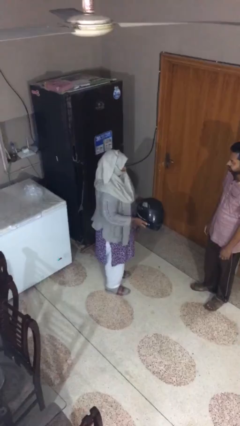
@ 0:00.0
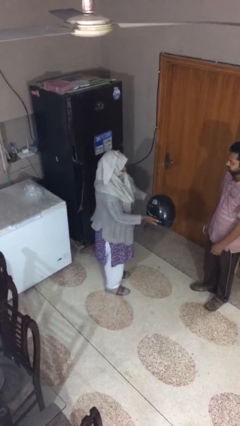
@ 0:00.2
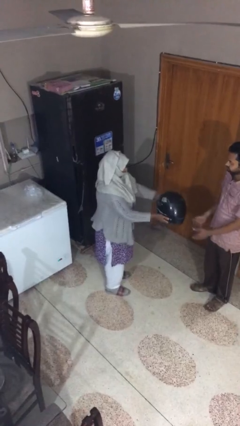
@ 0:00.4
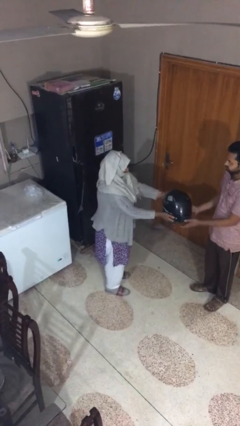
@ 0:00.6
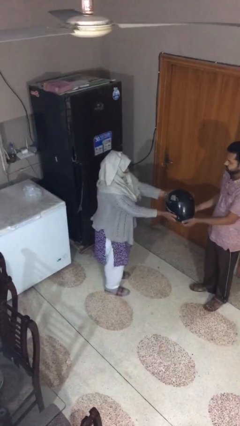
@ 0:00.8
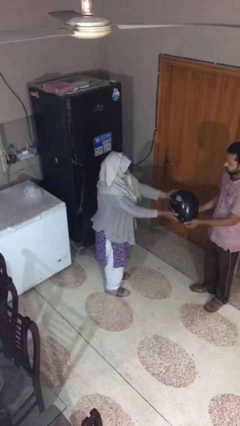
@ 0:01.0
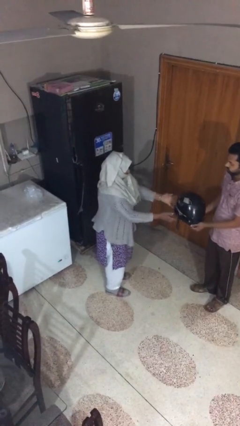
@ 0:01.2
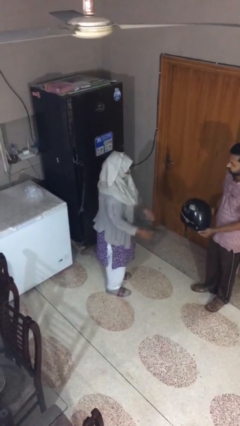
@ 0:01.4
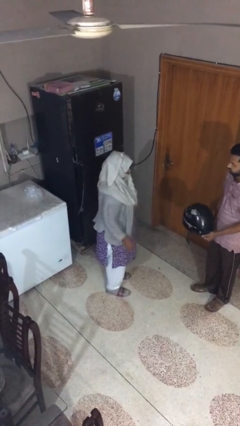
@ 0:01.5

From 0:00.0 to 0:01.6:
person transfers object to person

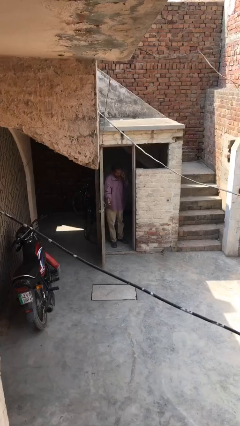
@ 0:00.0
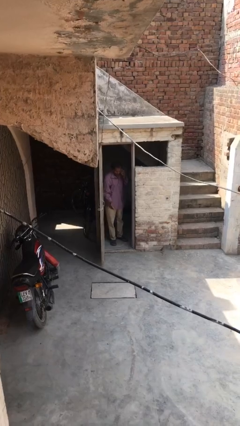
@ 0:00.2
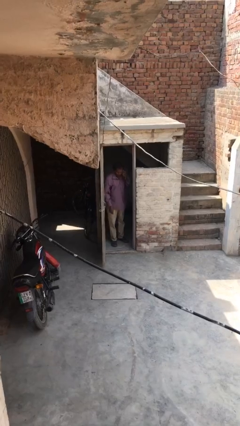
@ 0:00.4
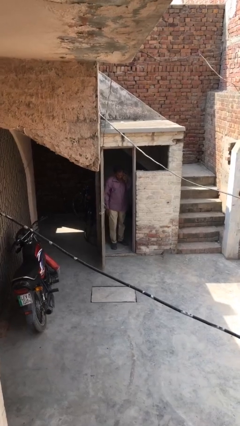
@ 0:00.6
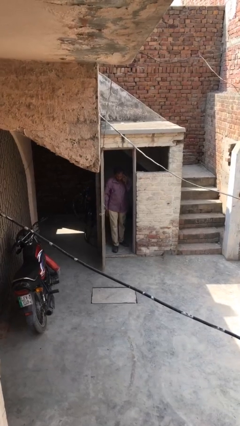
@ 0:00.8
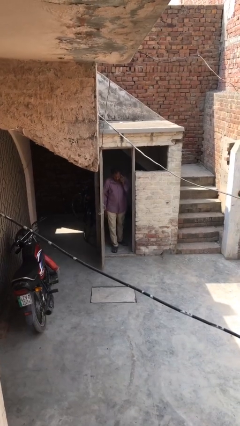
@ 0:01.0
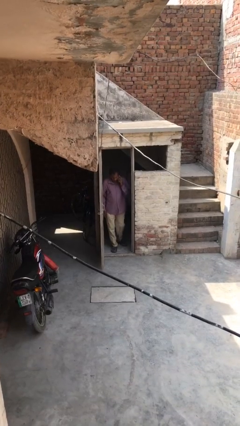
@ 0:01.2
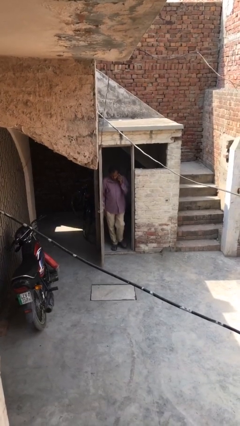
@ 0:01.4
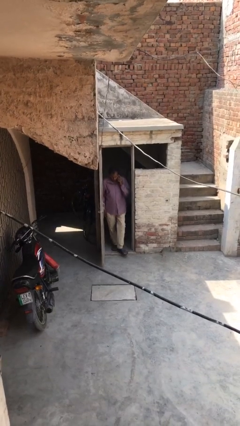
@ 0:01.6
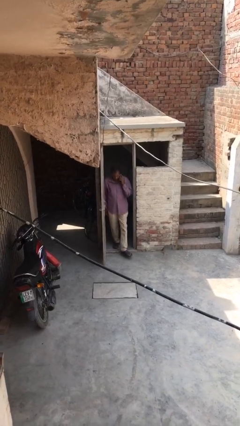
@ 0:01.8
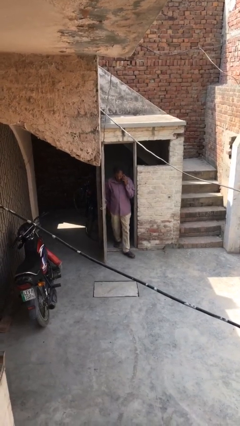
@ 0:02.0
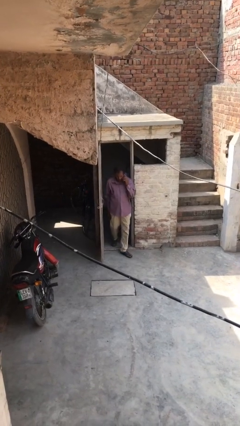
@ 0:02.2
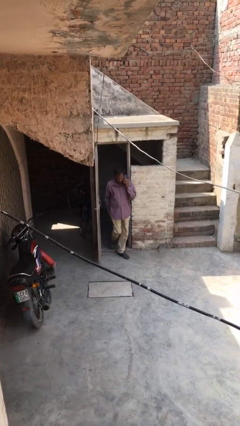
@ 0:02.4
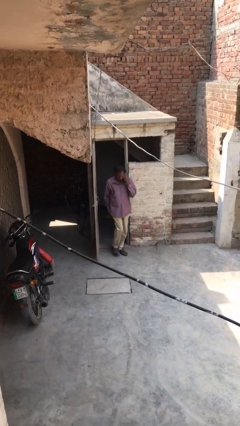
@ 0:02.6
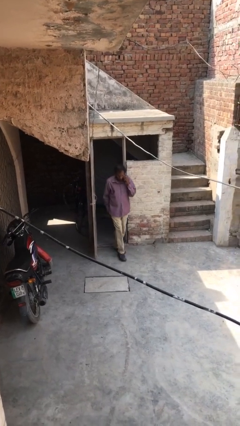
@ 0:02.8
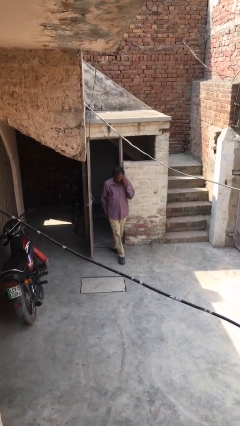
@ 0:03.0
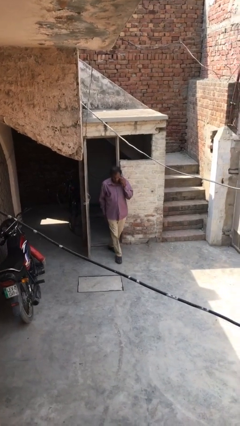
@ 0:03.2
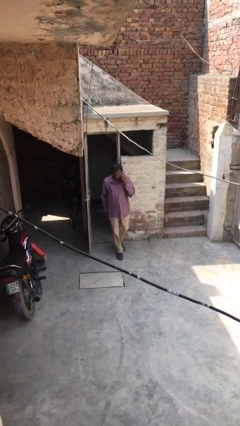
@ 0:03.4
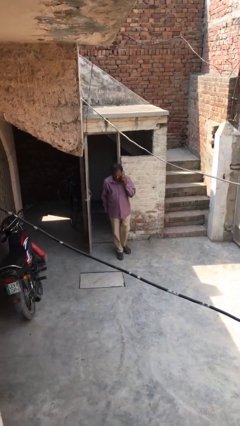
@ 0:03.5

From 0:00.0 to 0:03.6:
person enters scene through structure

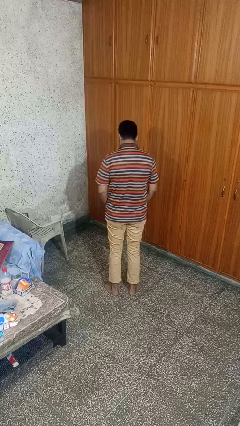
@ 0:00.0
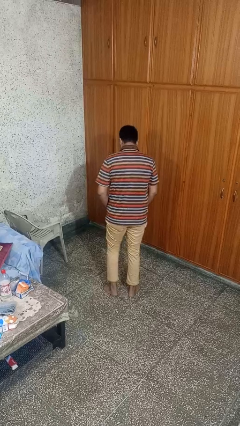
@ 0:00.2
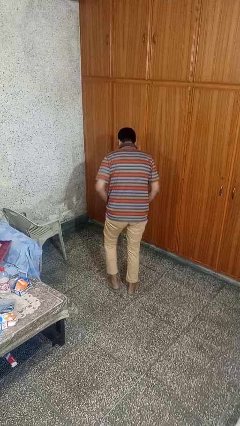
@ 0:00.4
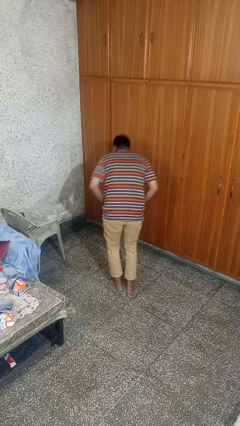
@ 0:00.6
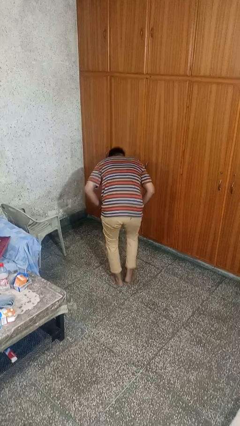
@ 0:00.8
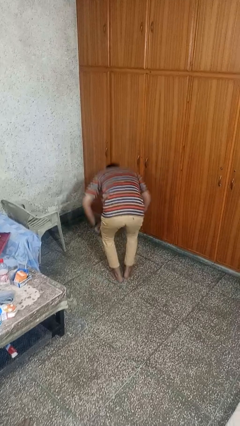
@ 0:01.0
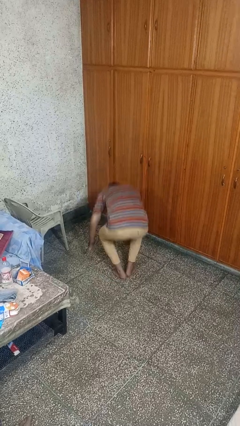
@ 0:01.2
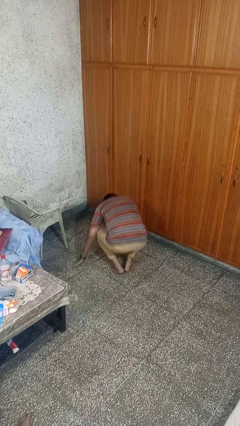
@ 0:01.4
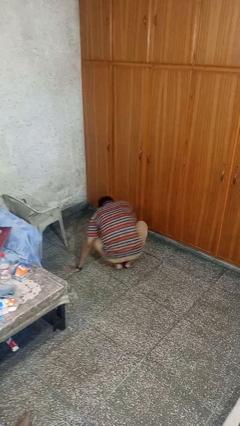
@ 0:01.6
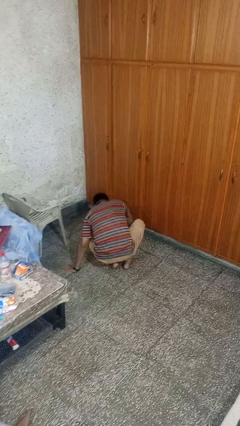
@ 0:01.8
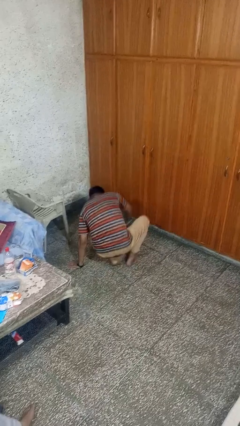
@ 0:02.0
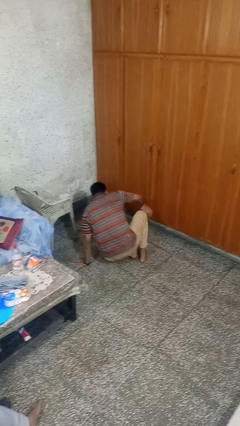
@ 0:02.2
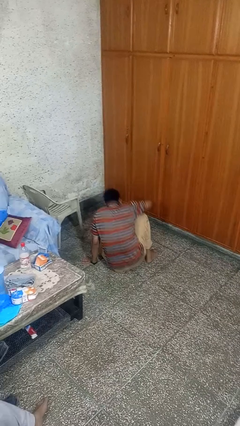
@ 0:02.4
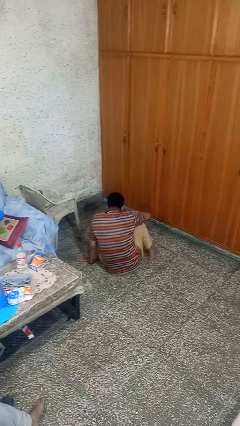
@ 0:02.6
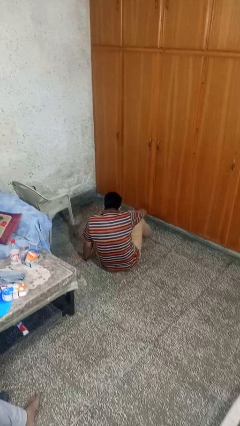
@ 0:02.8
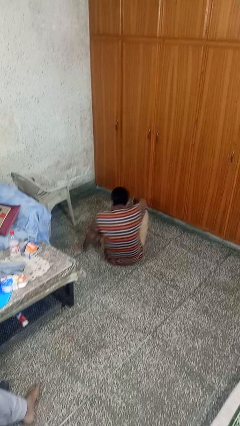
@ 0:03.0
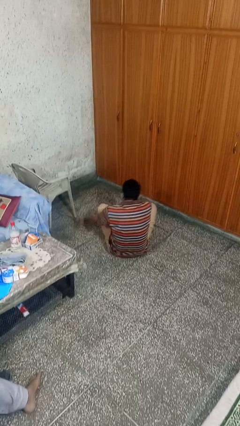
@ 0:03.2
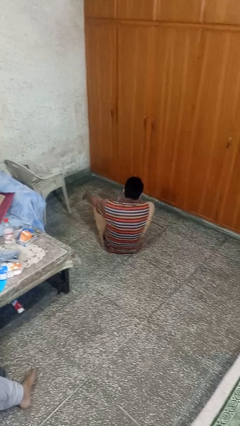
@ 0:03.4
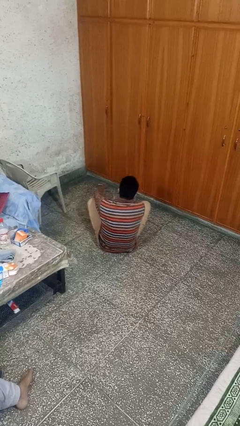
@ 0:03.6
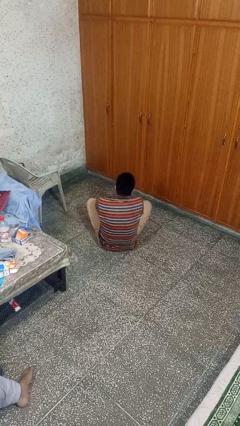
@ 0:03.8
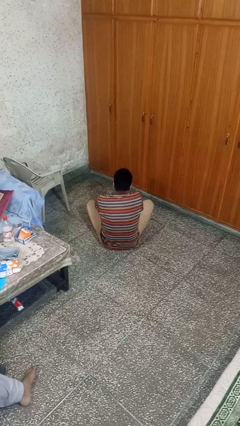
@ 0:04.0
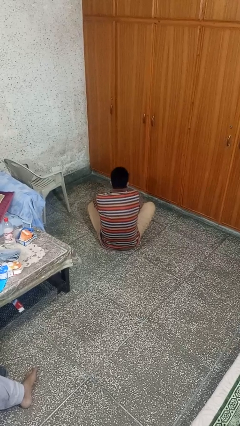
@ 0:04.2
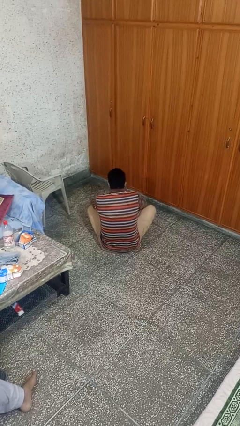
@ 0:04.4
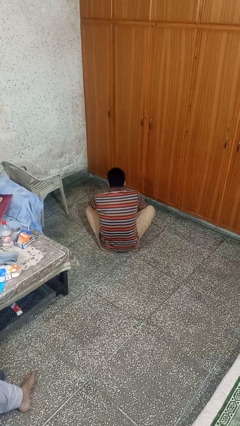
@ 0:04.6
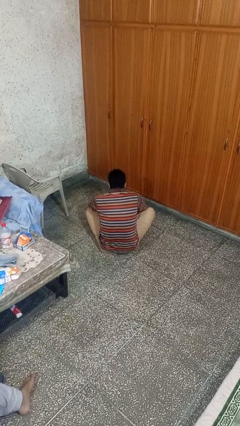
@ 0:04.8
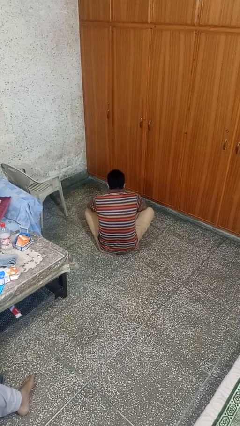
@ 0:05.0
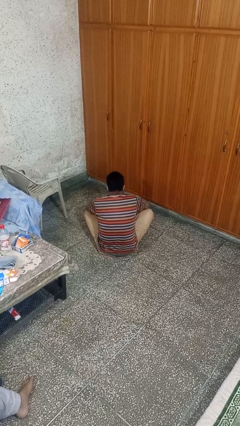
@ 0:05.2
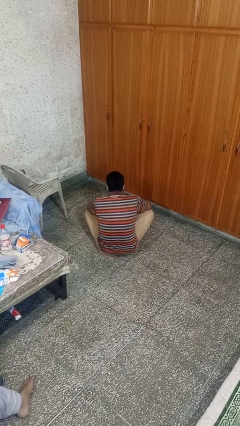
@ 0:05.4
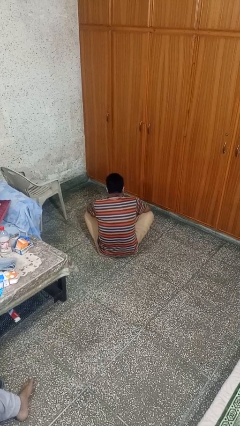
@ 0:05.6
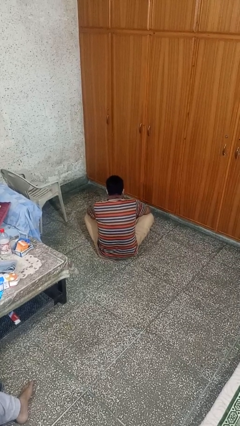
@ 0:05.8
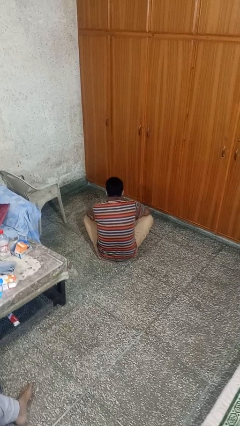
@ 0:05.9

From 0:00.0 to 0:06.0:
person sits crisscross

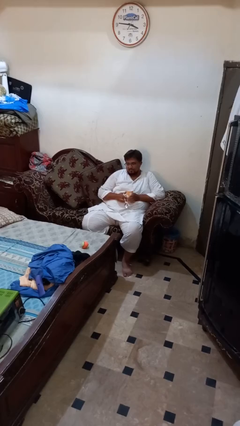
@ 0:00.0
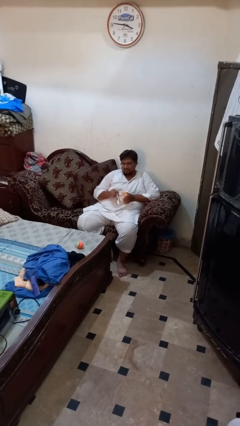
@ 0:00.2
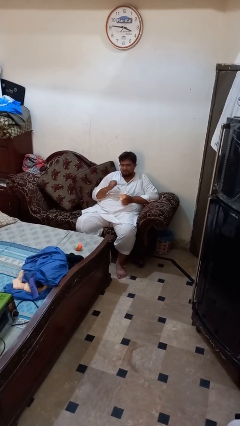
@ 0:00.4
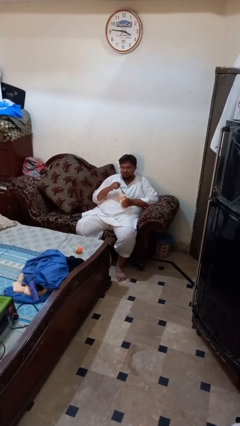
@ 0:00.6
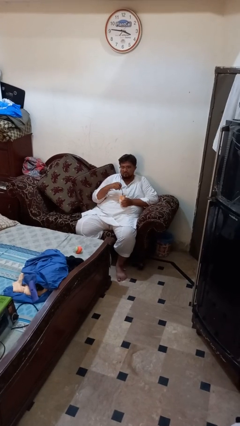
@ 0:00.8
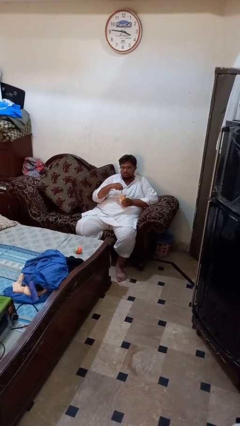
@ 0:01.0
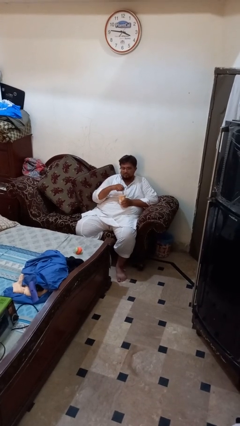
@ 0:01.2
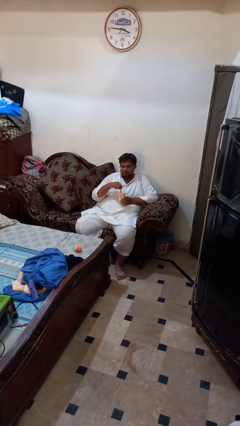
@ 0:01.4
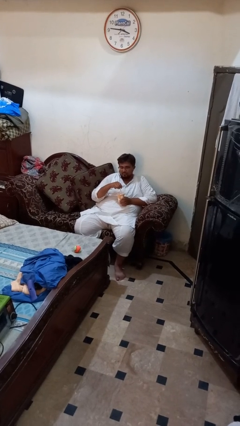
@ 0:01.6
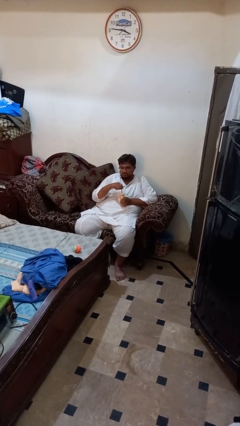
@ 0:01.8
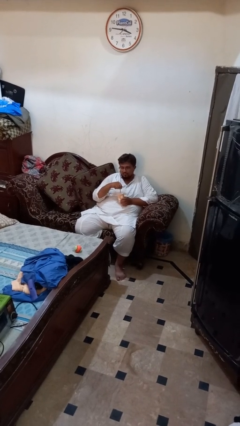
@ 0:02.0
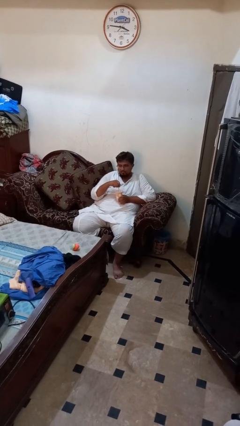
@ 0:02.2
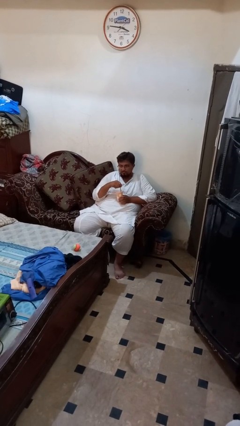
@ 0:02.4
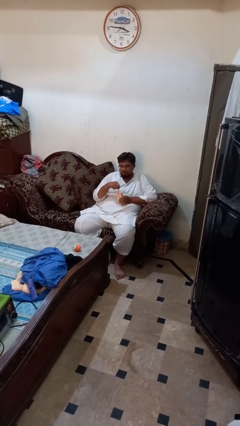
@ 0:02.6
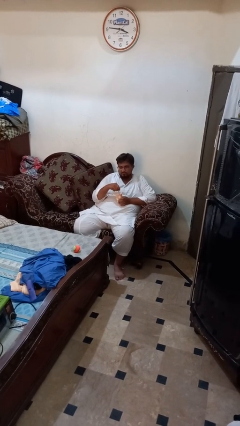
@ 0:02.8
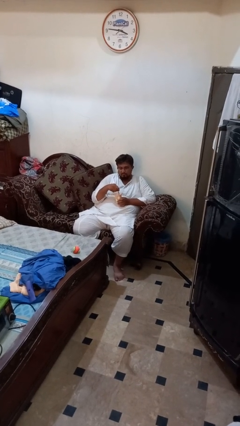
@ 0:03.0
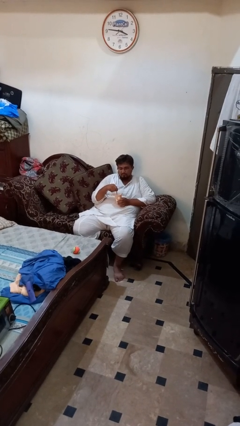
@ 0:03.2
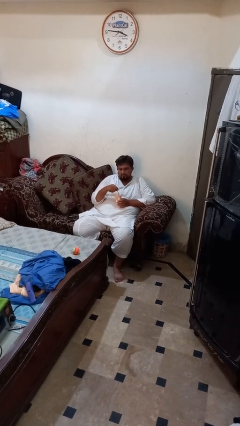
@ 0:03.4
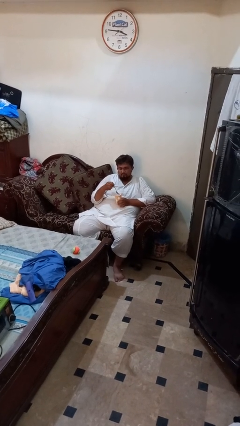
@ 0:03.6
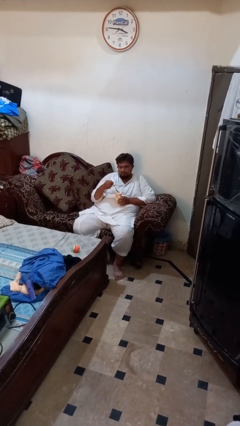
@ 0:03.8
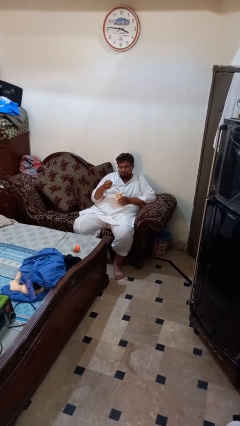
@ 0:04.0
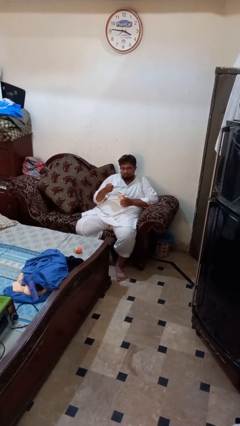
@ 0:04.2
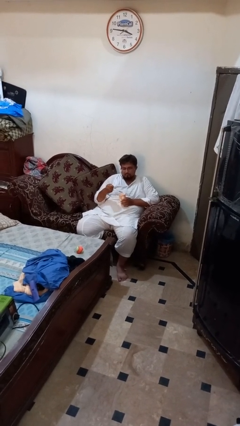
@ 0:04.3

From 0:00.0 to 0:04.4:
person stirs mug

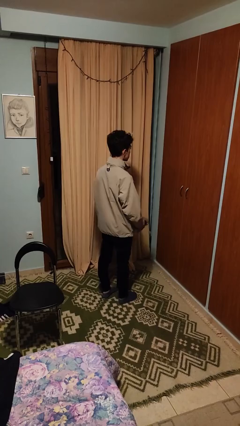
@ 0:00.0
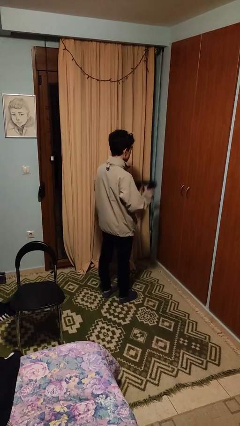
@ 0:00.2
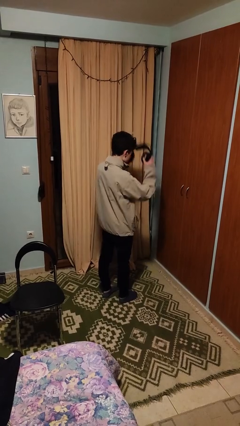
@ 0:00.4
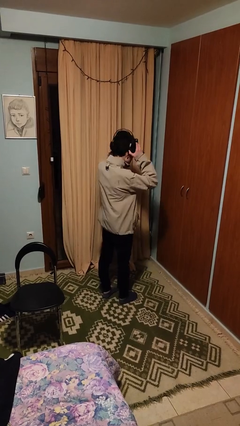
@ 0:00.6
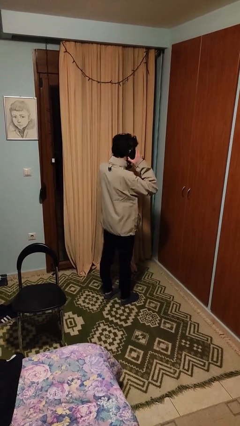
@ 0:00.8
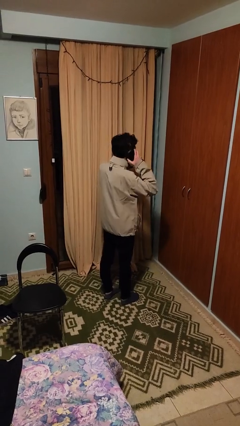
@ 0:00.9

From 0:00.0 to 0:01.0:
person puts on headphones

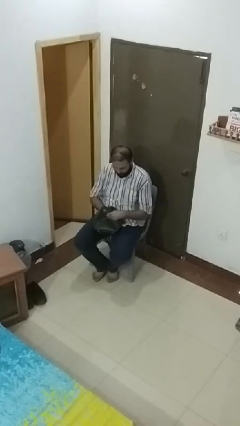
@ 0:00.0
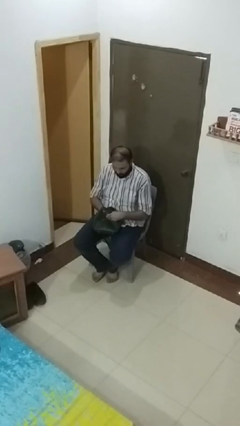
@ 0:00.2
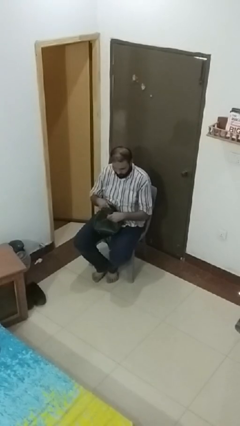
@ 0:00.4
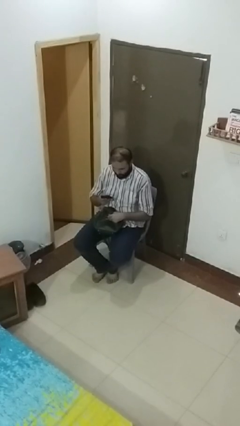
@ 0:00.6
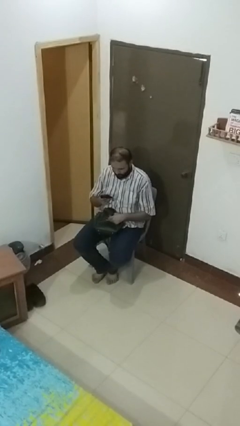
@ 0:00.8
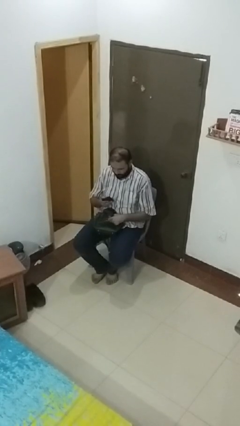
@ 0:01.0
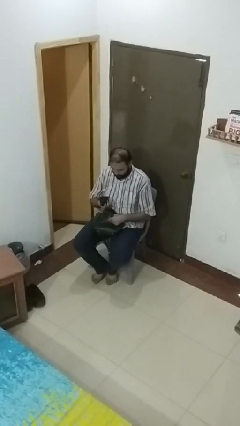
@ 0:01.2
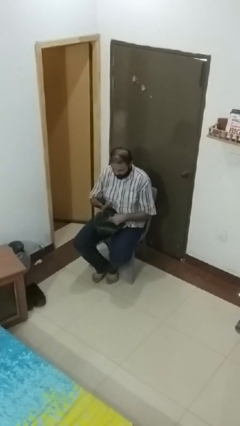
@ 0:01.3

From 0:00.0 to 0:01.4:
person takes object from purse
